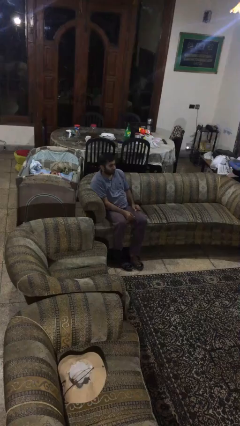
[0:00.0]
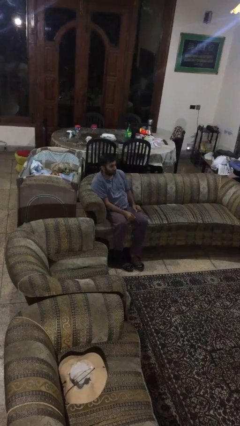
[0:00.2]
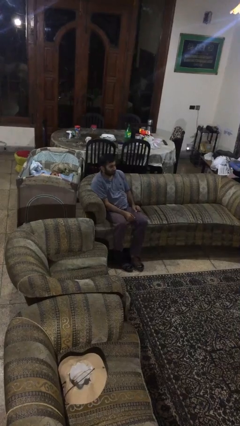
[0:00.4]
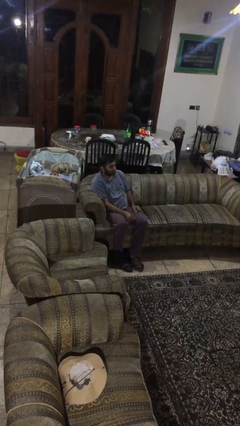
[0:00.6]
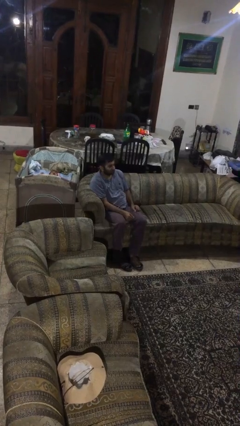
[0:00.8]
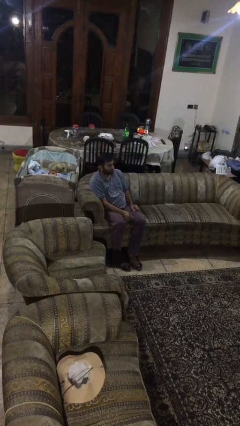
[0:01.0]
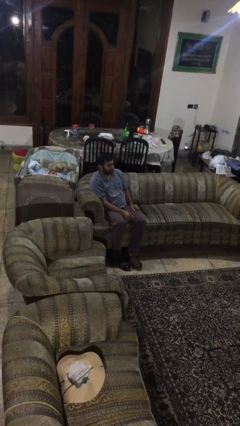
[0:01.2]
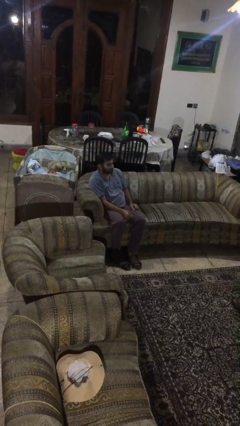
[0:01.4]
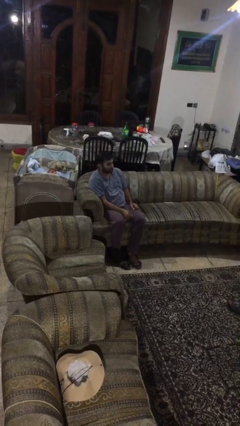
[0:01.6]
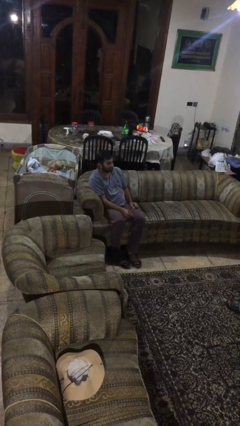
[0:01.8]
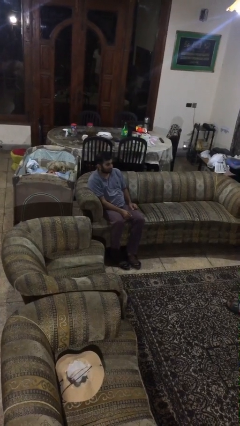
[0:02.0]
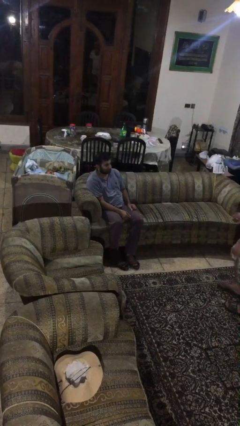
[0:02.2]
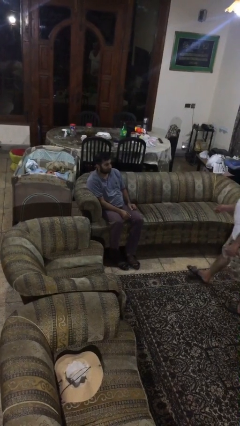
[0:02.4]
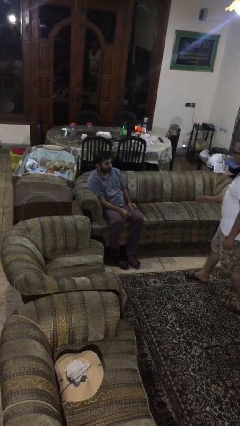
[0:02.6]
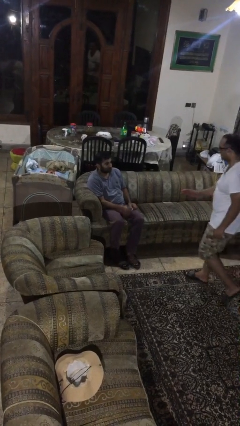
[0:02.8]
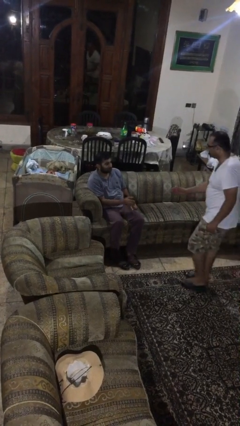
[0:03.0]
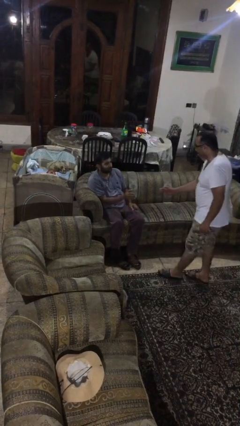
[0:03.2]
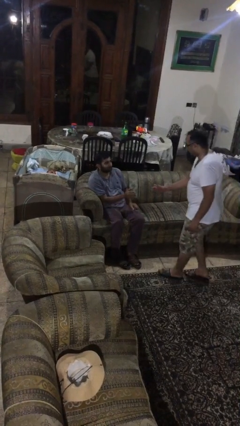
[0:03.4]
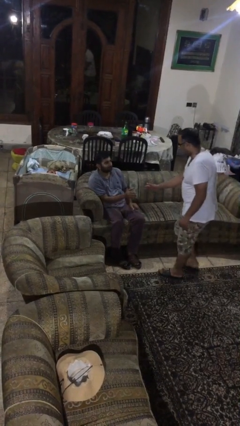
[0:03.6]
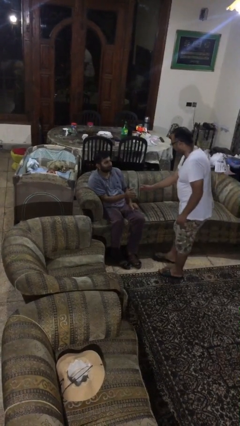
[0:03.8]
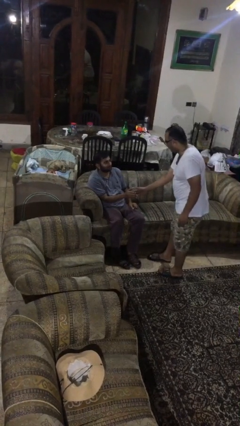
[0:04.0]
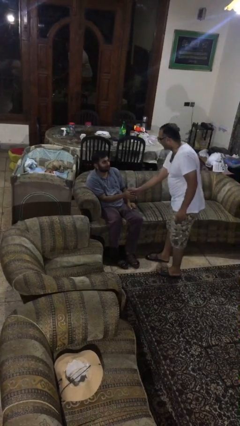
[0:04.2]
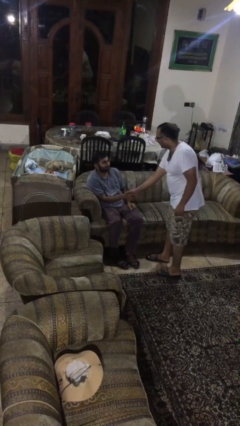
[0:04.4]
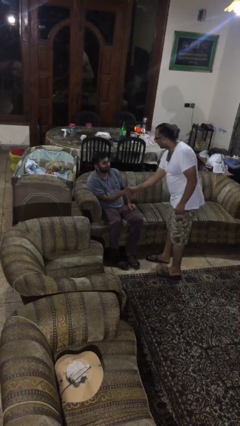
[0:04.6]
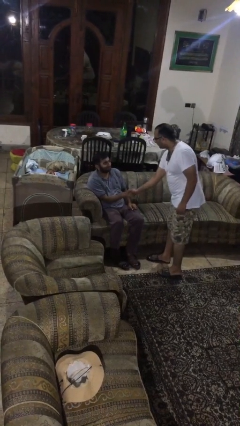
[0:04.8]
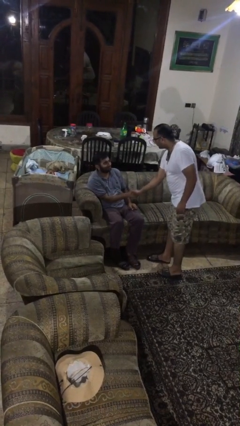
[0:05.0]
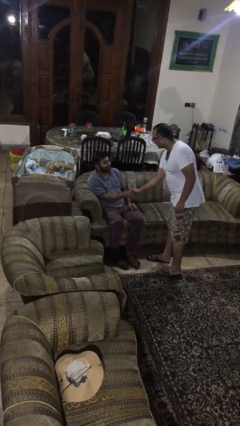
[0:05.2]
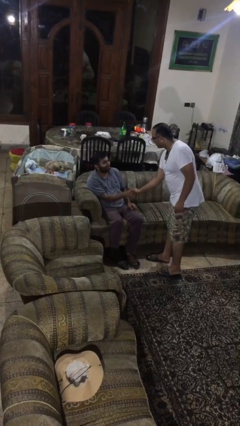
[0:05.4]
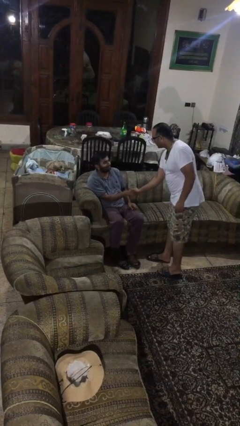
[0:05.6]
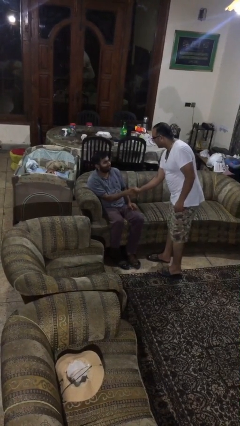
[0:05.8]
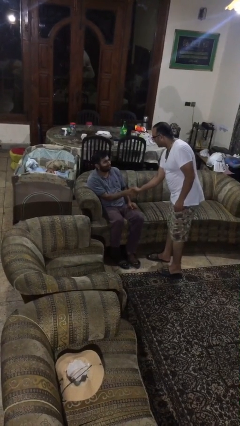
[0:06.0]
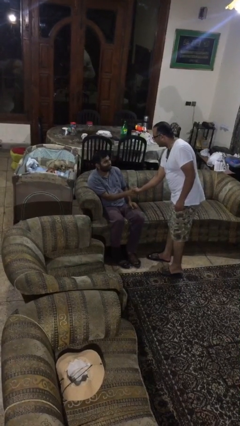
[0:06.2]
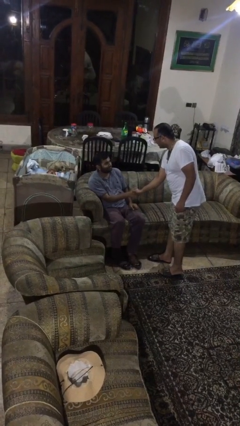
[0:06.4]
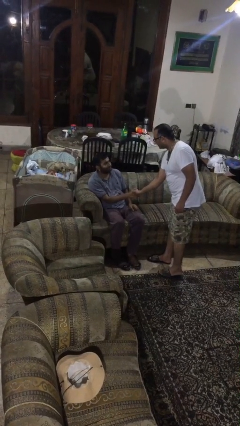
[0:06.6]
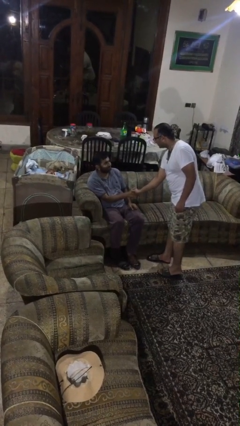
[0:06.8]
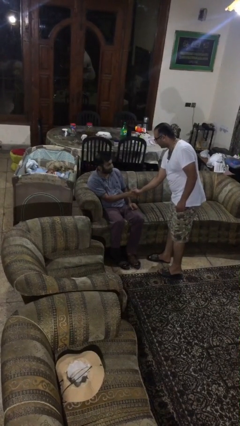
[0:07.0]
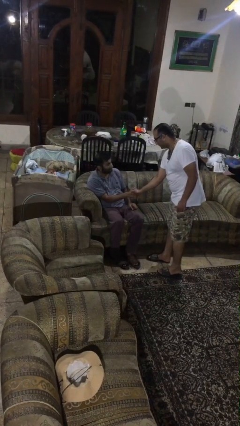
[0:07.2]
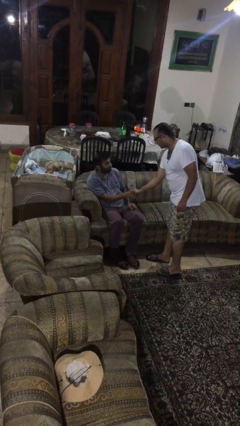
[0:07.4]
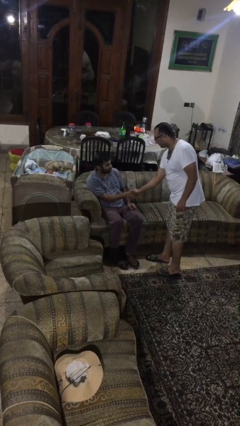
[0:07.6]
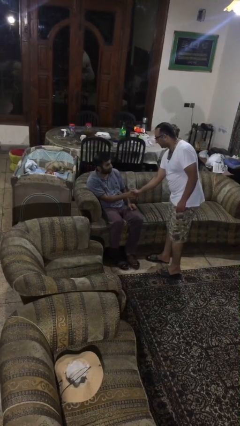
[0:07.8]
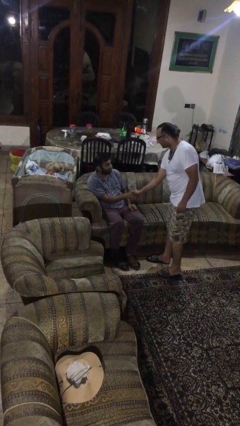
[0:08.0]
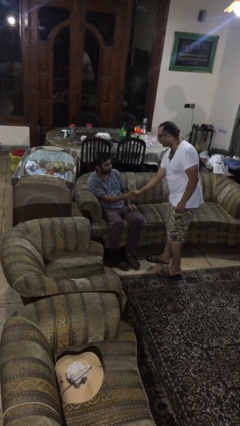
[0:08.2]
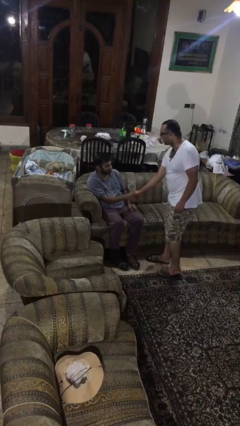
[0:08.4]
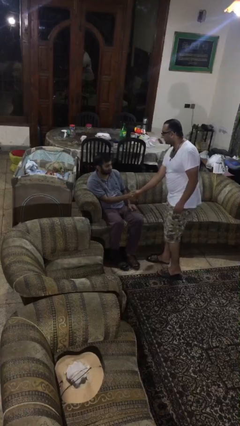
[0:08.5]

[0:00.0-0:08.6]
person shakes hand

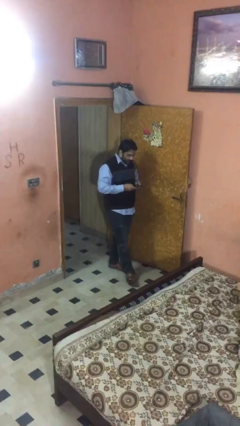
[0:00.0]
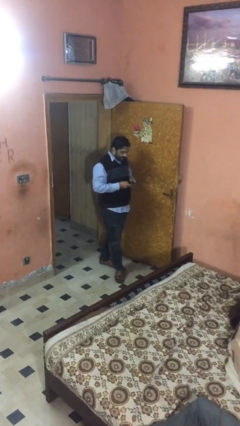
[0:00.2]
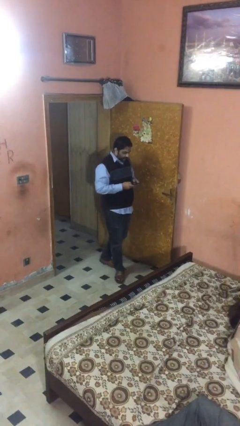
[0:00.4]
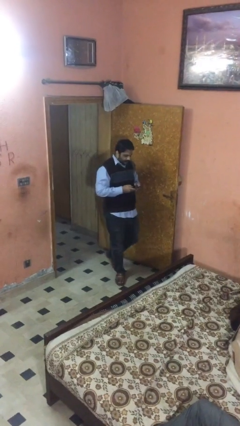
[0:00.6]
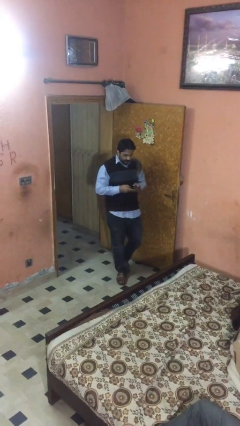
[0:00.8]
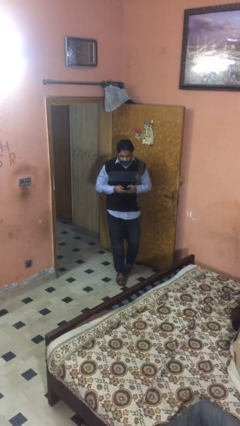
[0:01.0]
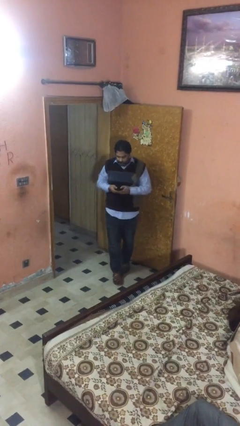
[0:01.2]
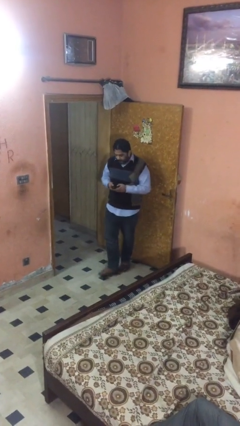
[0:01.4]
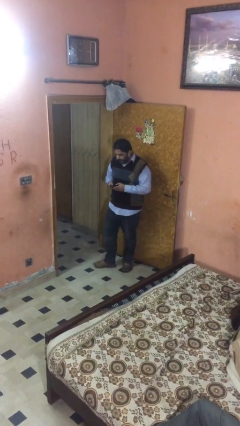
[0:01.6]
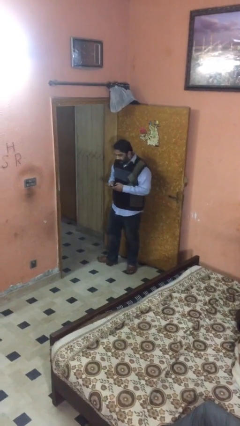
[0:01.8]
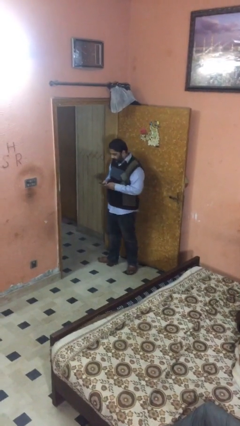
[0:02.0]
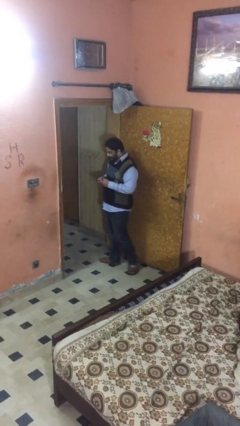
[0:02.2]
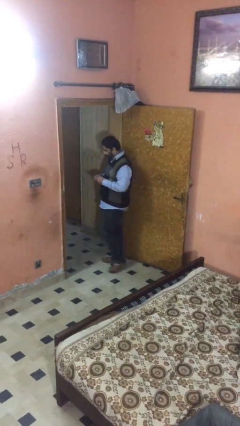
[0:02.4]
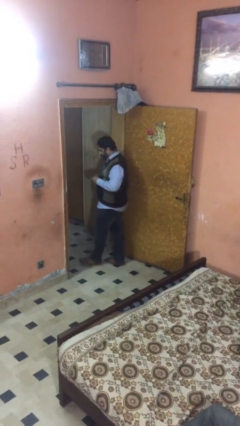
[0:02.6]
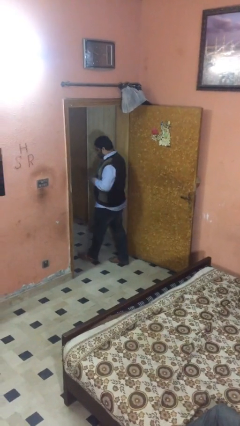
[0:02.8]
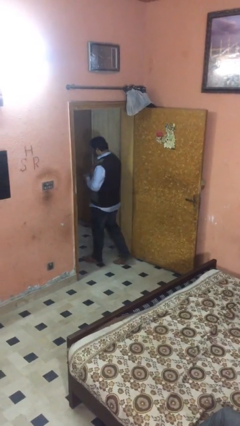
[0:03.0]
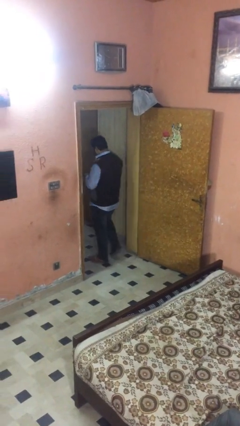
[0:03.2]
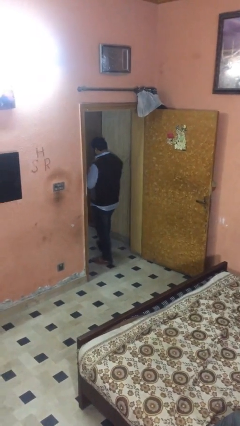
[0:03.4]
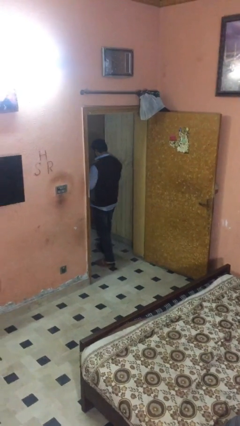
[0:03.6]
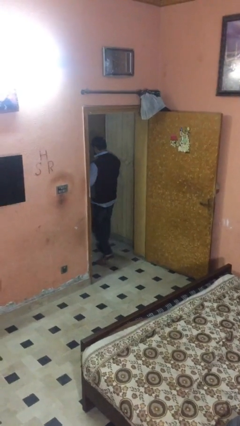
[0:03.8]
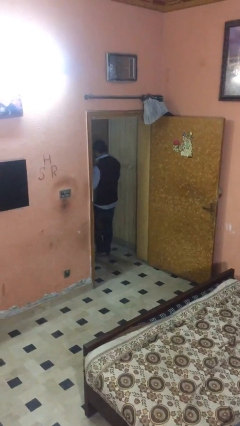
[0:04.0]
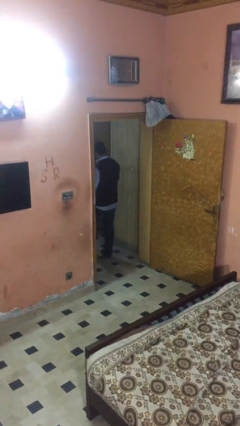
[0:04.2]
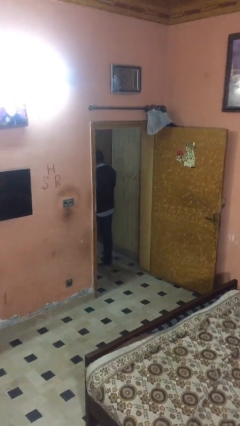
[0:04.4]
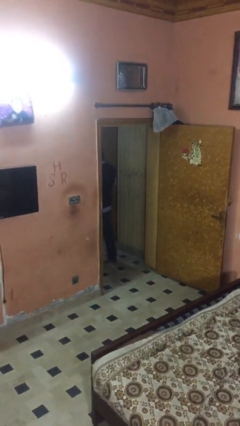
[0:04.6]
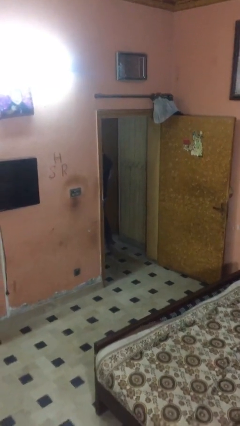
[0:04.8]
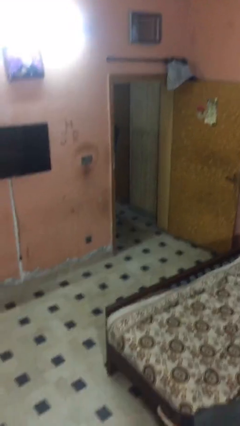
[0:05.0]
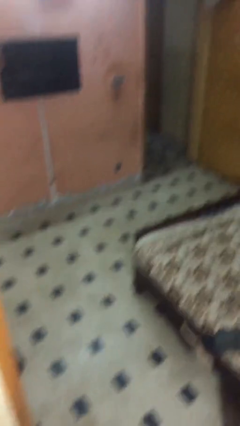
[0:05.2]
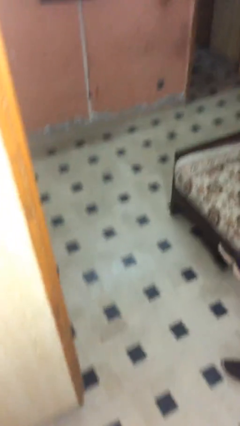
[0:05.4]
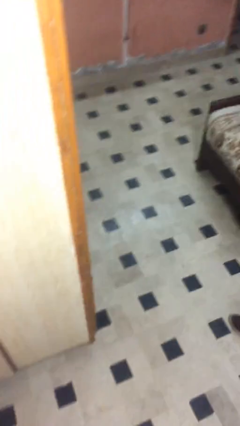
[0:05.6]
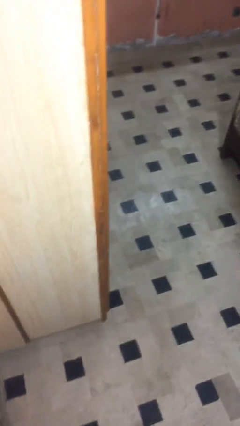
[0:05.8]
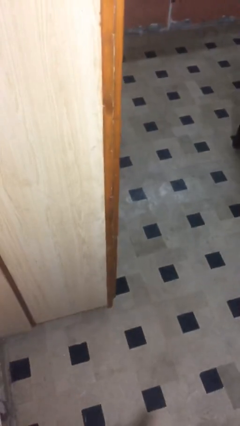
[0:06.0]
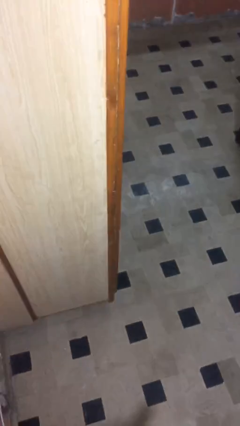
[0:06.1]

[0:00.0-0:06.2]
person exits scene through structure

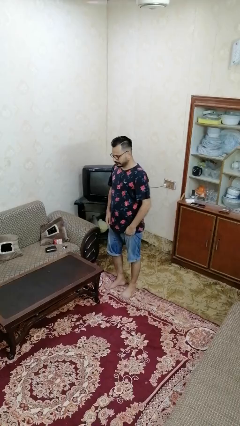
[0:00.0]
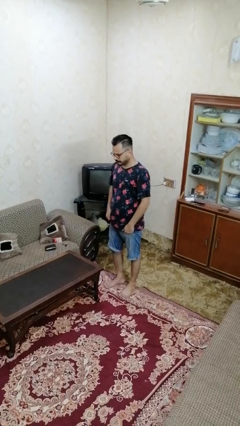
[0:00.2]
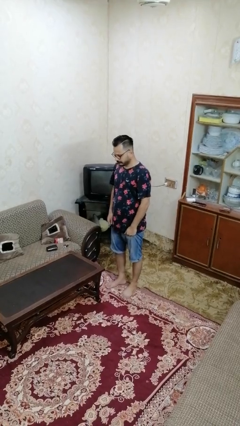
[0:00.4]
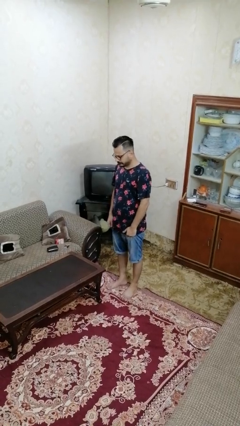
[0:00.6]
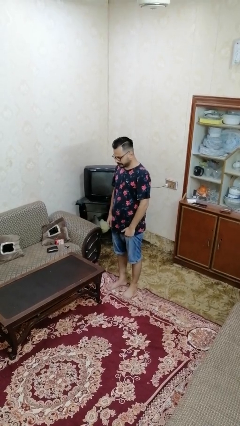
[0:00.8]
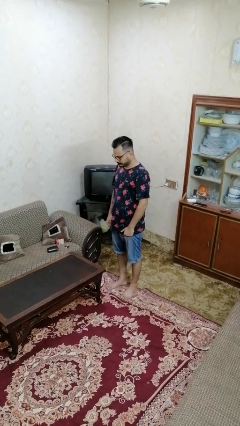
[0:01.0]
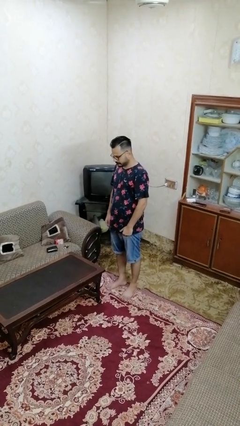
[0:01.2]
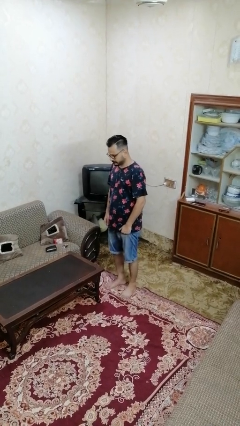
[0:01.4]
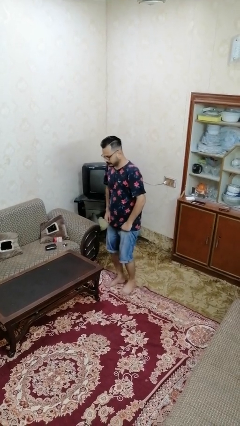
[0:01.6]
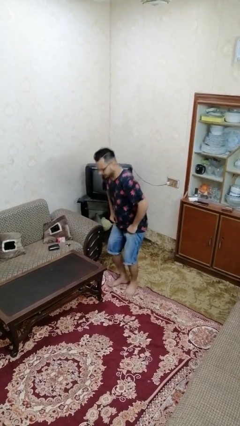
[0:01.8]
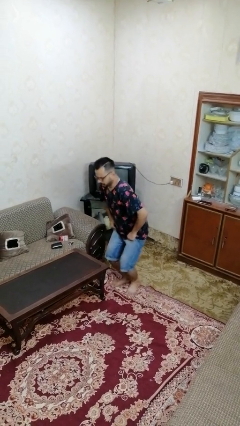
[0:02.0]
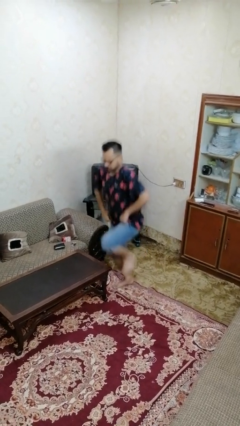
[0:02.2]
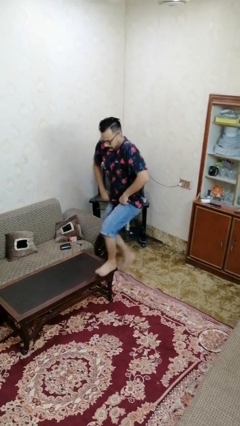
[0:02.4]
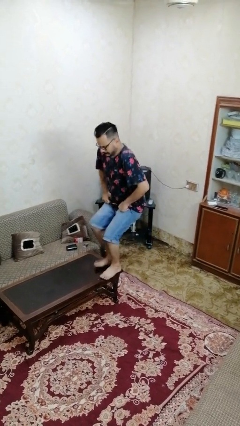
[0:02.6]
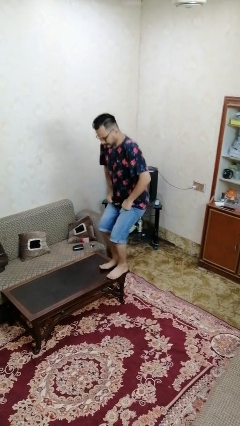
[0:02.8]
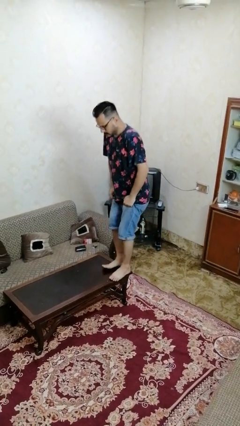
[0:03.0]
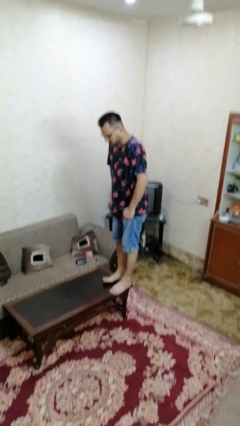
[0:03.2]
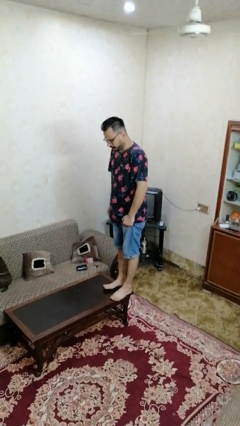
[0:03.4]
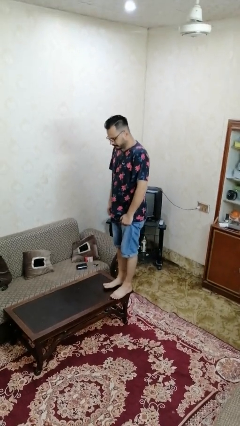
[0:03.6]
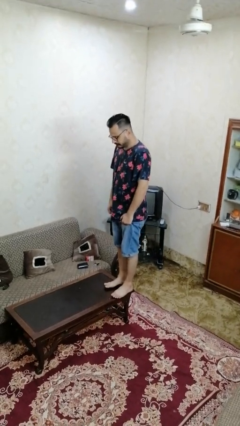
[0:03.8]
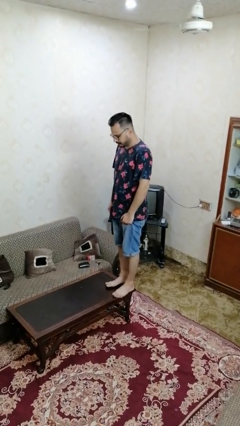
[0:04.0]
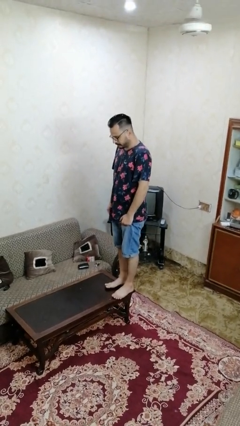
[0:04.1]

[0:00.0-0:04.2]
person climbs on table
